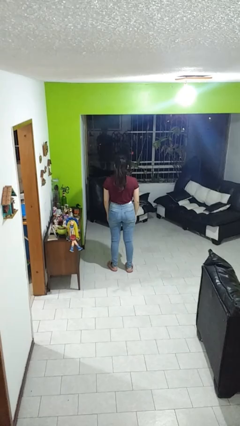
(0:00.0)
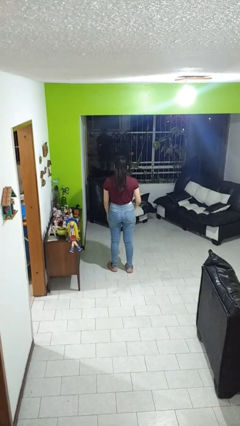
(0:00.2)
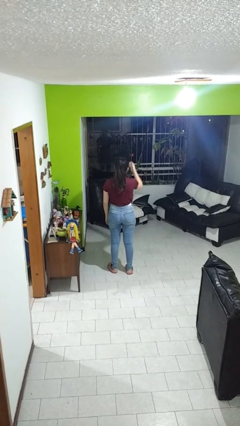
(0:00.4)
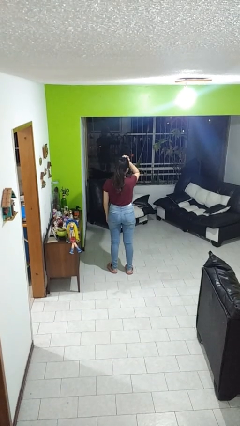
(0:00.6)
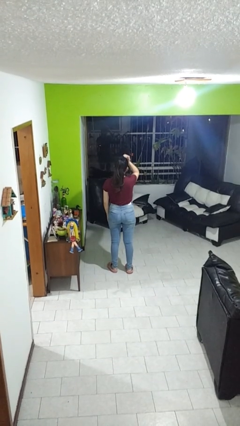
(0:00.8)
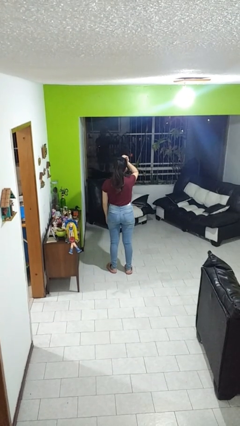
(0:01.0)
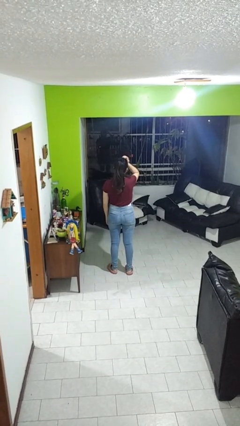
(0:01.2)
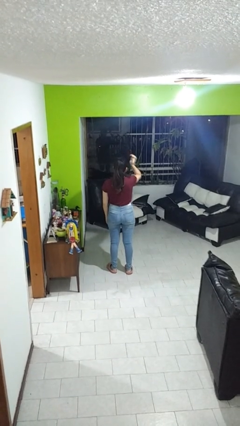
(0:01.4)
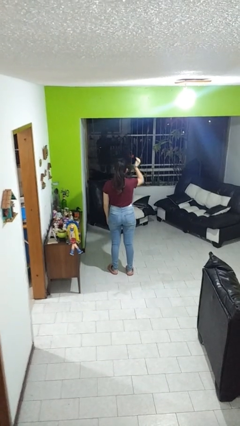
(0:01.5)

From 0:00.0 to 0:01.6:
person scratches face

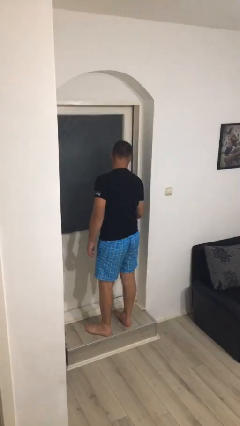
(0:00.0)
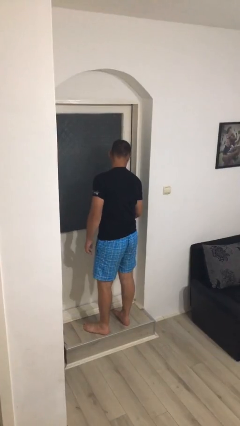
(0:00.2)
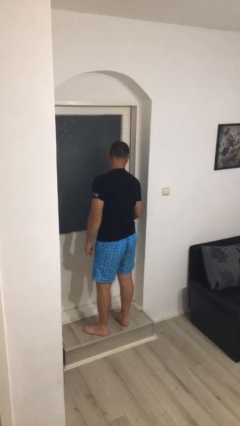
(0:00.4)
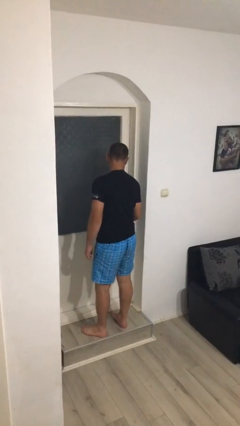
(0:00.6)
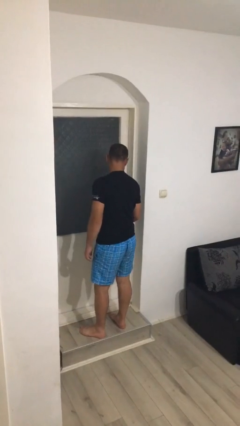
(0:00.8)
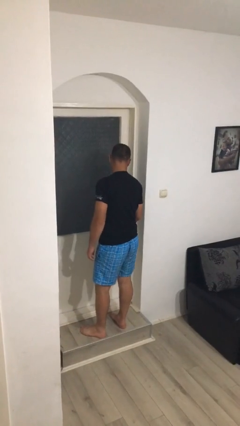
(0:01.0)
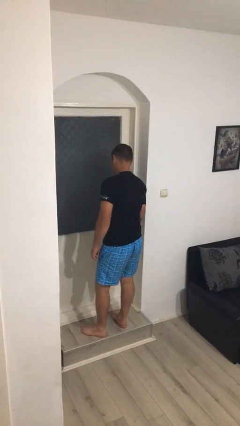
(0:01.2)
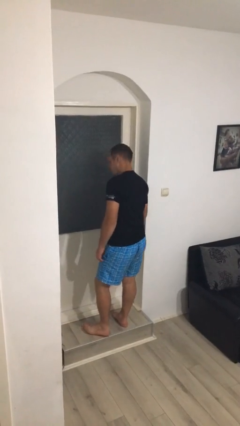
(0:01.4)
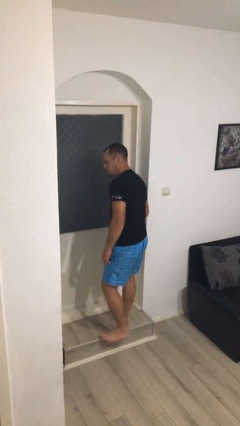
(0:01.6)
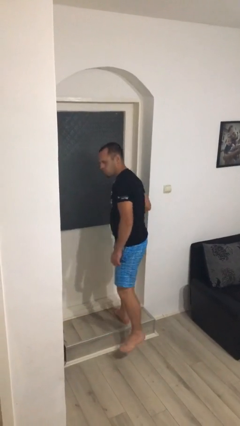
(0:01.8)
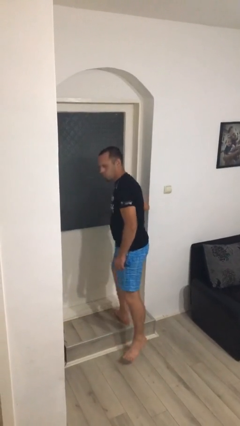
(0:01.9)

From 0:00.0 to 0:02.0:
person closes facility door

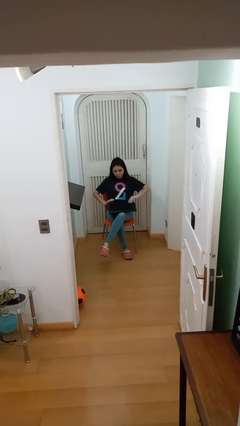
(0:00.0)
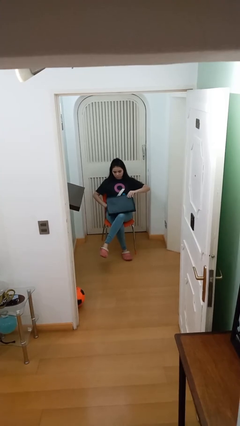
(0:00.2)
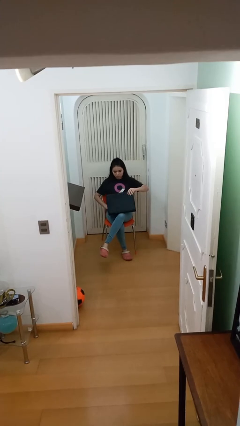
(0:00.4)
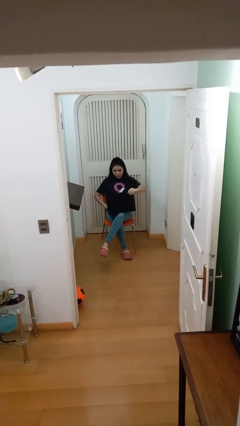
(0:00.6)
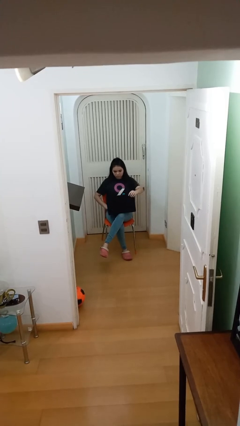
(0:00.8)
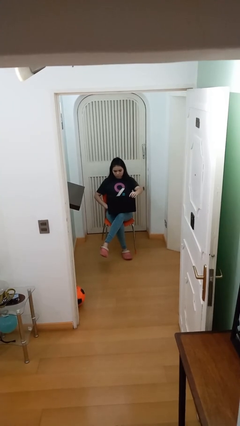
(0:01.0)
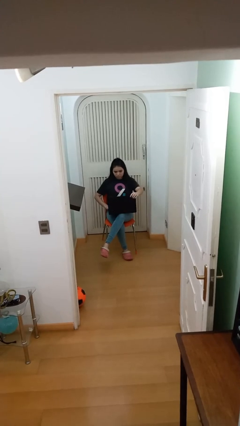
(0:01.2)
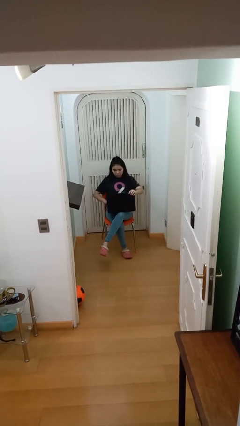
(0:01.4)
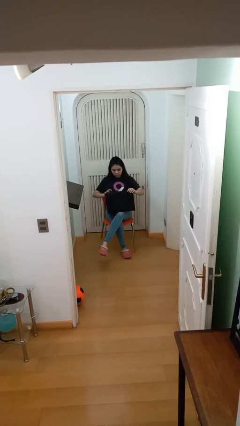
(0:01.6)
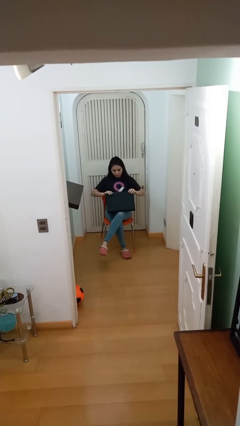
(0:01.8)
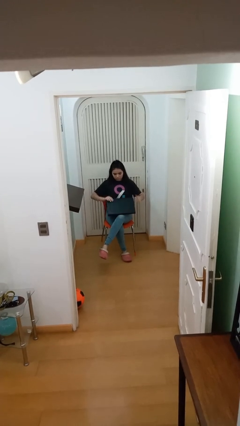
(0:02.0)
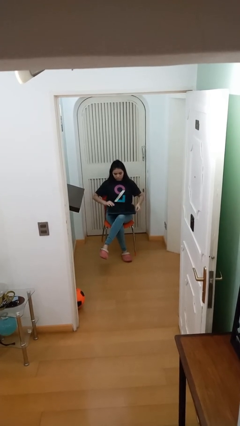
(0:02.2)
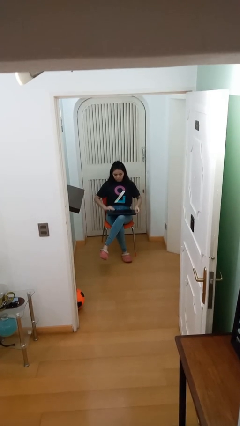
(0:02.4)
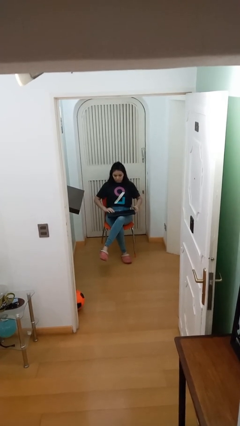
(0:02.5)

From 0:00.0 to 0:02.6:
person interacts with laptop

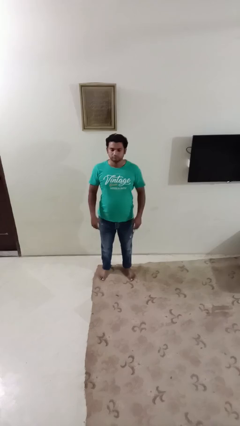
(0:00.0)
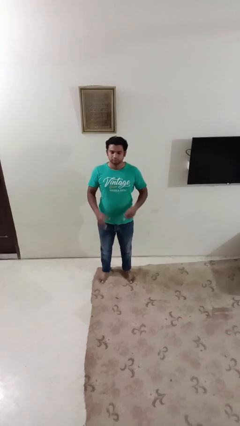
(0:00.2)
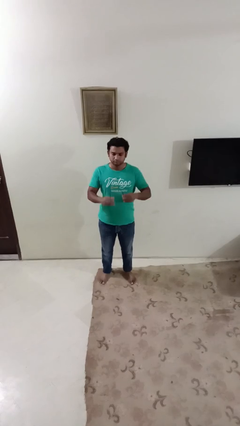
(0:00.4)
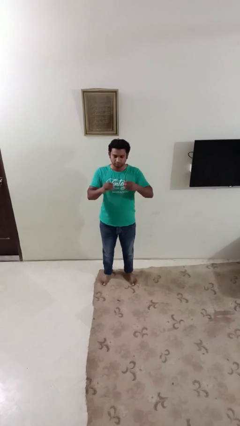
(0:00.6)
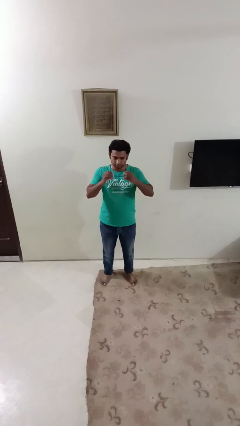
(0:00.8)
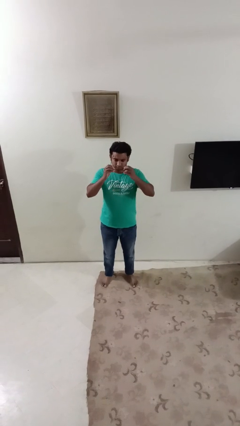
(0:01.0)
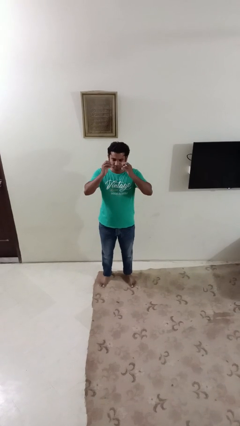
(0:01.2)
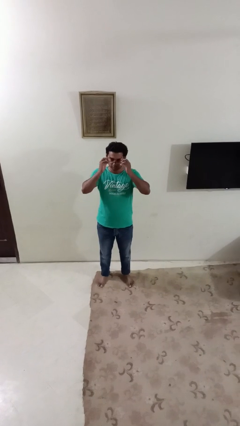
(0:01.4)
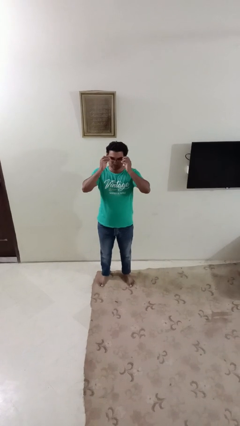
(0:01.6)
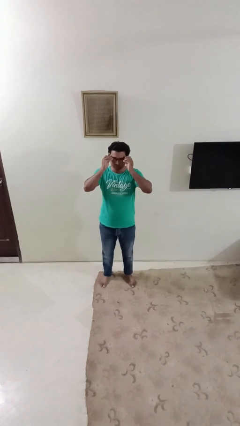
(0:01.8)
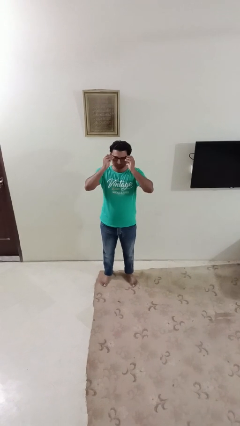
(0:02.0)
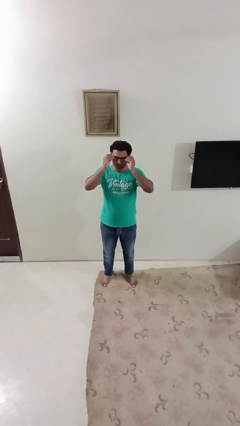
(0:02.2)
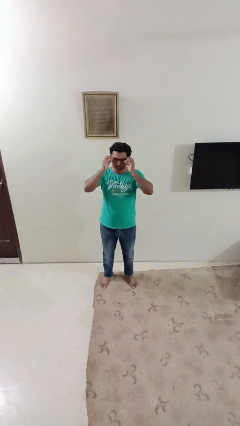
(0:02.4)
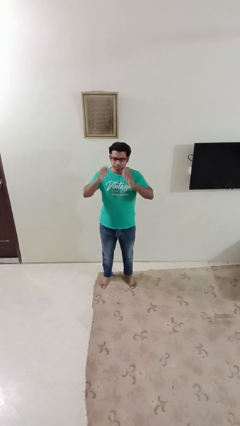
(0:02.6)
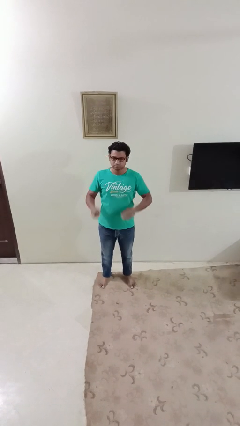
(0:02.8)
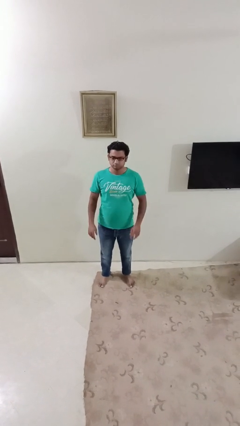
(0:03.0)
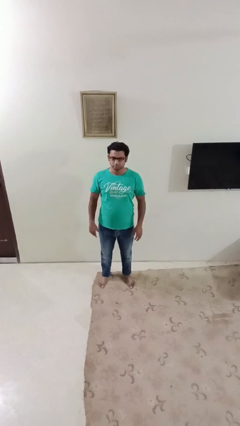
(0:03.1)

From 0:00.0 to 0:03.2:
person puts on glasses

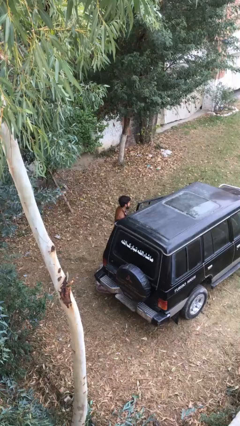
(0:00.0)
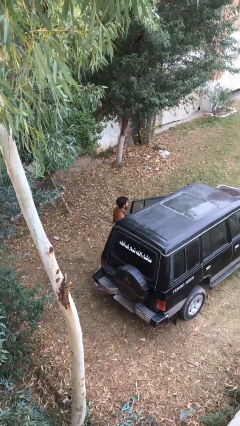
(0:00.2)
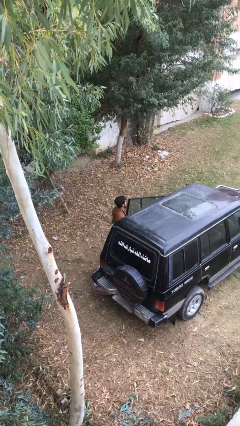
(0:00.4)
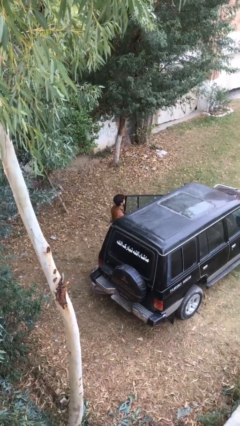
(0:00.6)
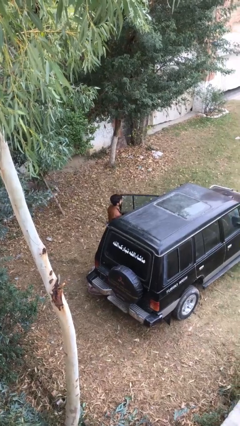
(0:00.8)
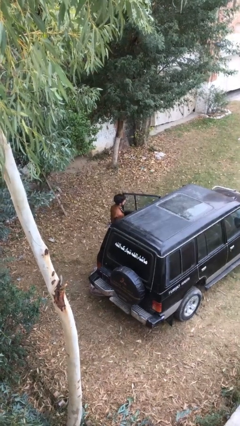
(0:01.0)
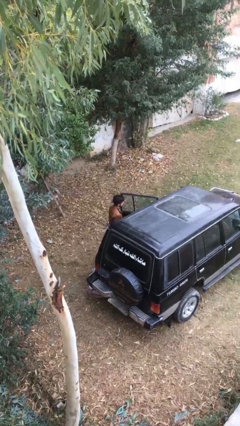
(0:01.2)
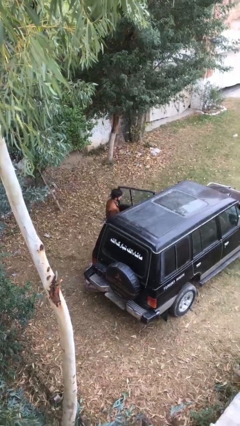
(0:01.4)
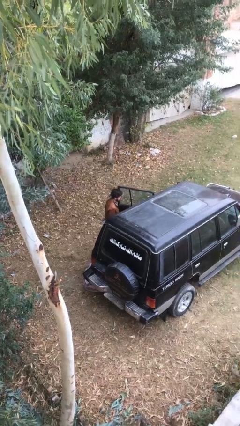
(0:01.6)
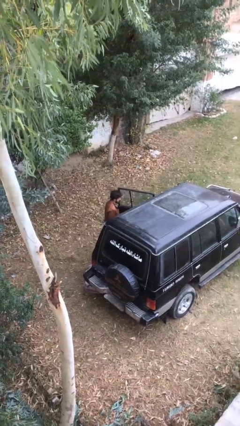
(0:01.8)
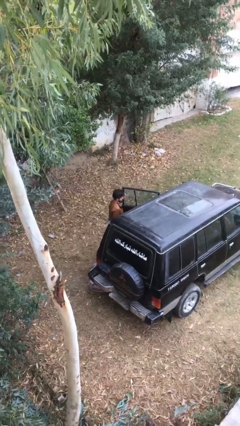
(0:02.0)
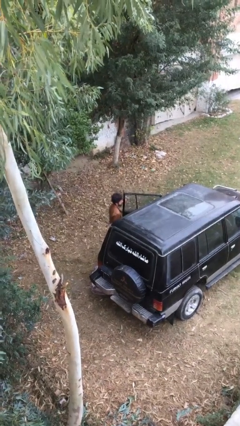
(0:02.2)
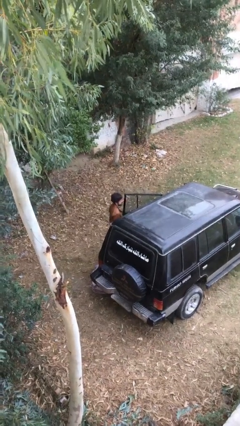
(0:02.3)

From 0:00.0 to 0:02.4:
person opens car door

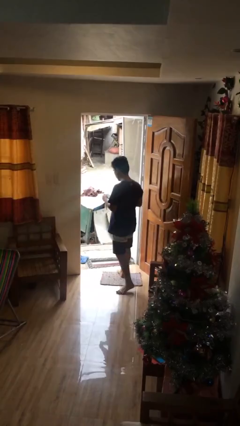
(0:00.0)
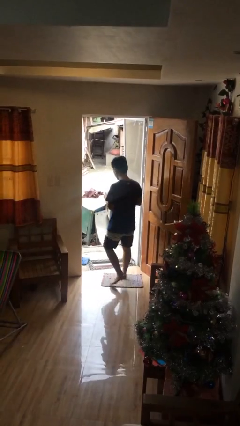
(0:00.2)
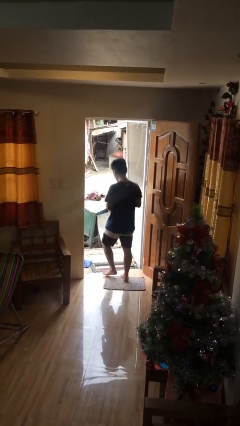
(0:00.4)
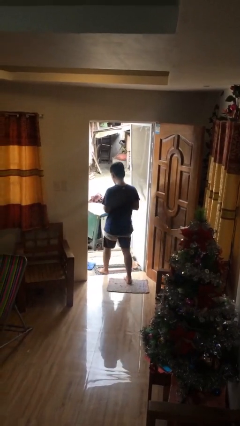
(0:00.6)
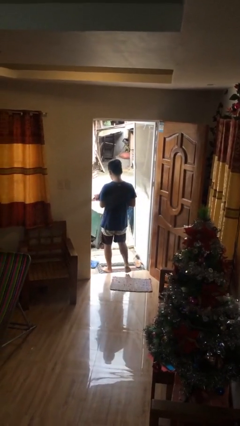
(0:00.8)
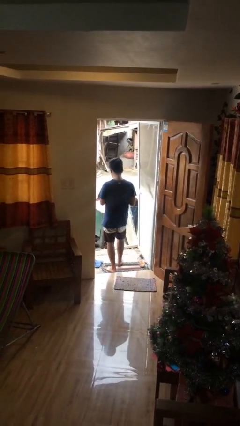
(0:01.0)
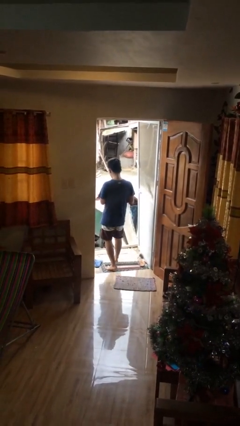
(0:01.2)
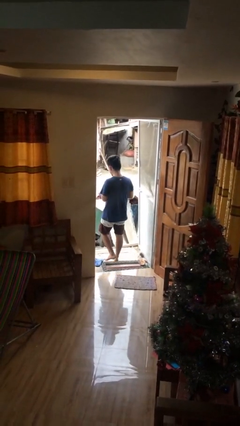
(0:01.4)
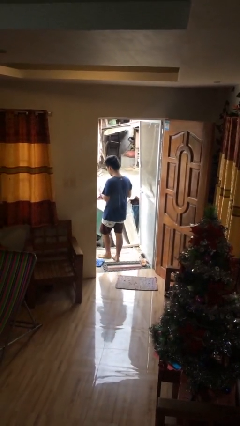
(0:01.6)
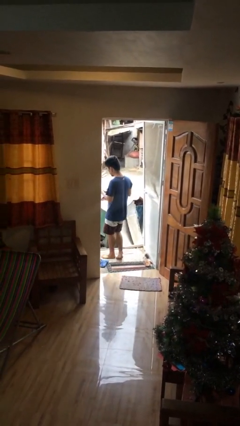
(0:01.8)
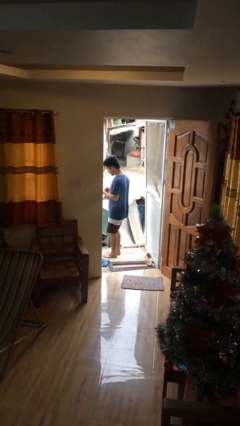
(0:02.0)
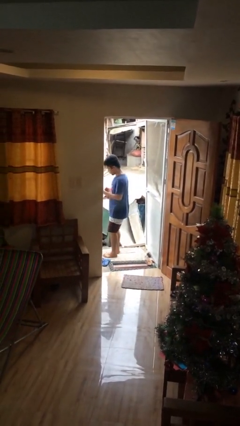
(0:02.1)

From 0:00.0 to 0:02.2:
person exits scene through structure

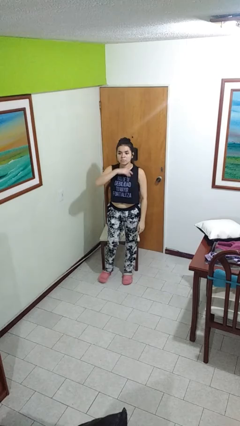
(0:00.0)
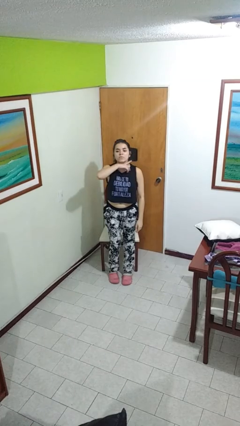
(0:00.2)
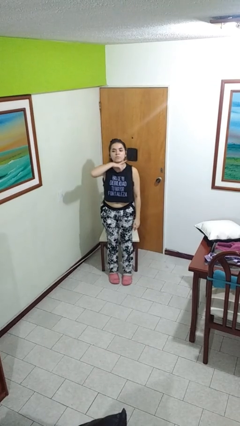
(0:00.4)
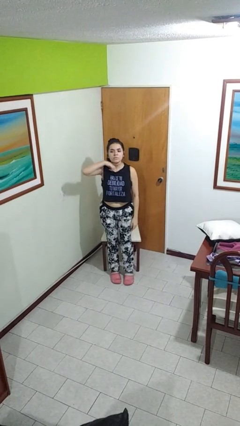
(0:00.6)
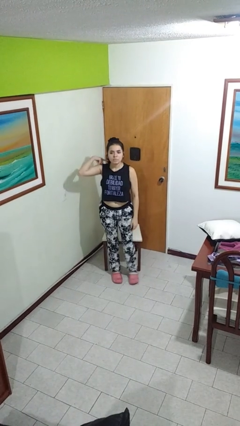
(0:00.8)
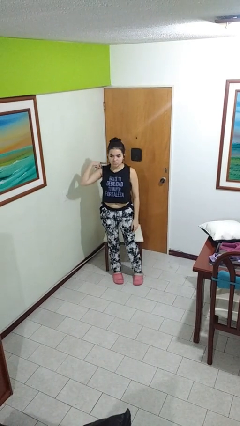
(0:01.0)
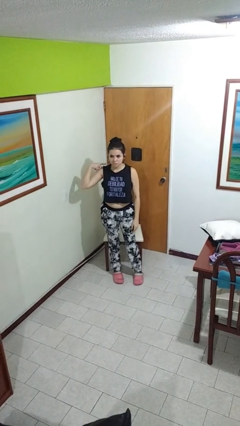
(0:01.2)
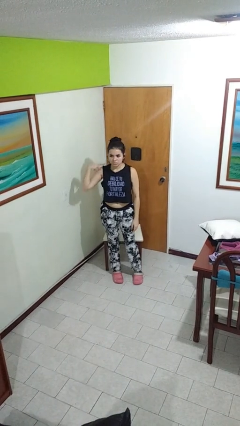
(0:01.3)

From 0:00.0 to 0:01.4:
person gestures cut

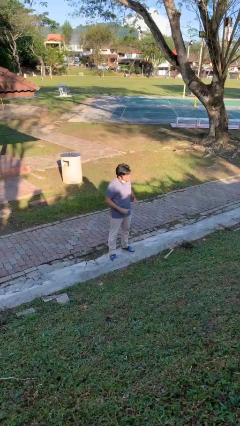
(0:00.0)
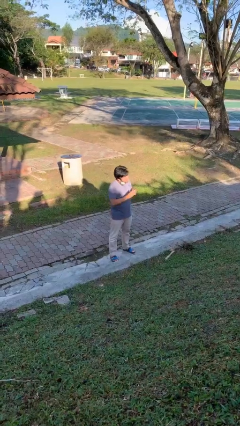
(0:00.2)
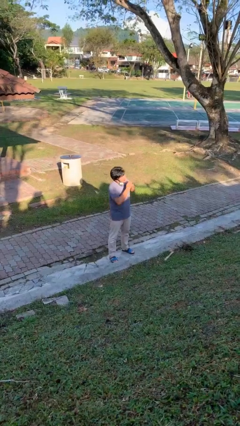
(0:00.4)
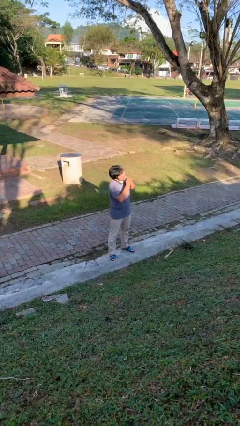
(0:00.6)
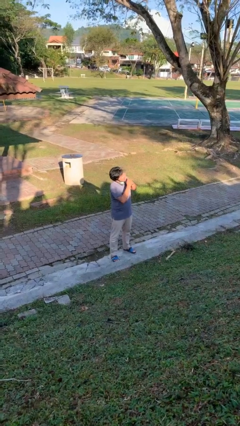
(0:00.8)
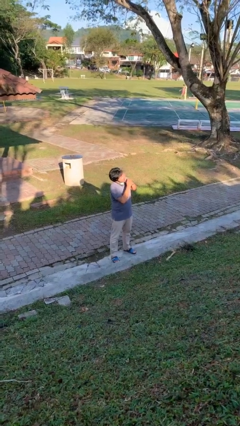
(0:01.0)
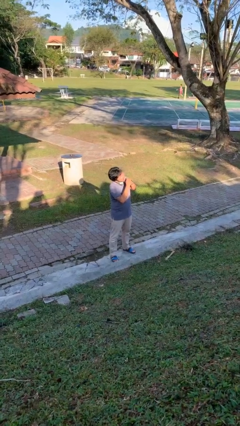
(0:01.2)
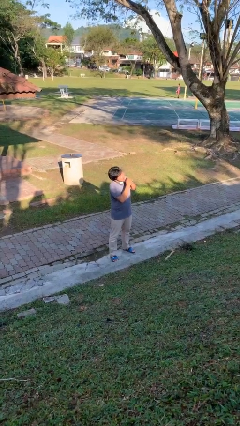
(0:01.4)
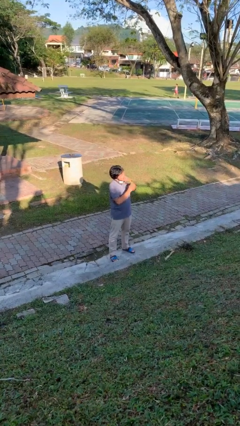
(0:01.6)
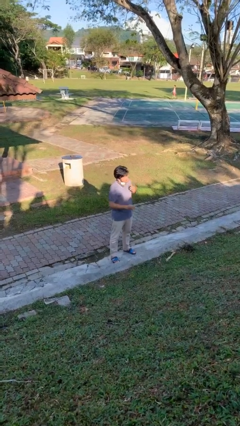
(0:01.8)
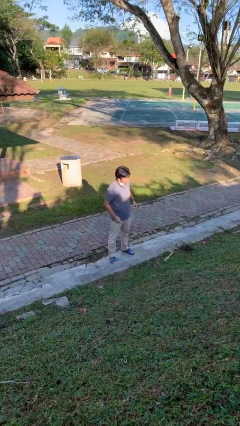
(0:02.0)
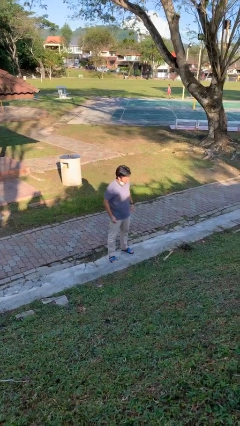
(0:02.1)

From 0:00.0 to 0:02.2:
person flosses
